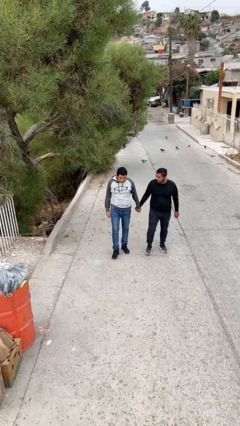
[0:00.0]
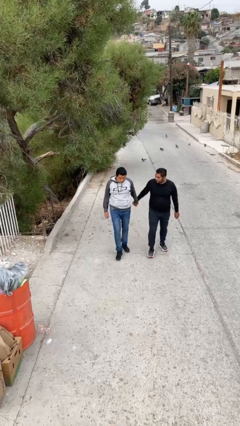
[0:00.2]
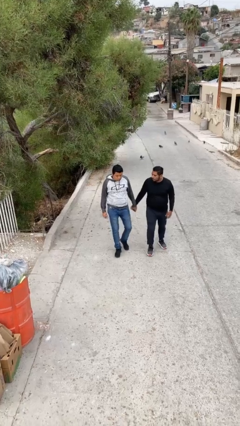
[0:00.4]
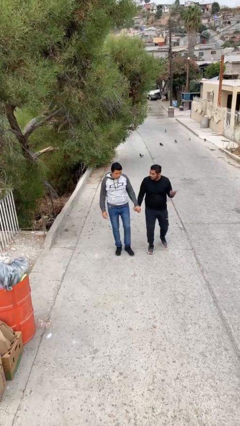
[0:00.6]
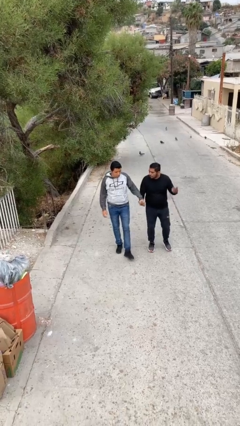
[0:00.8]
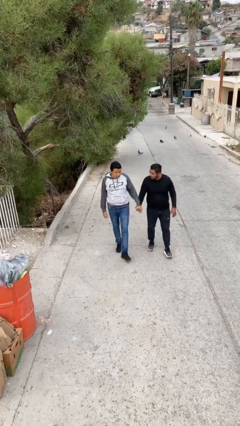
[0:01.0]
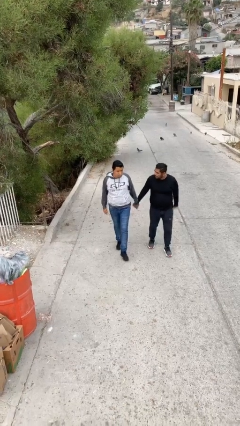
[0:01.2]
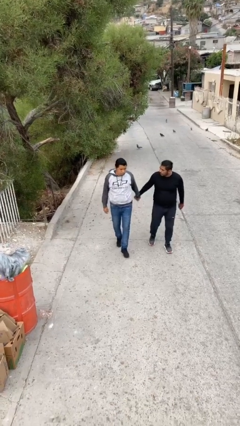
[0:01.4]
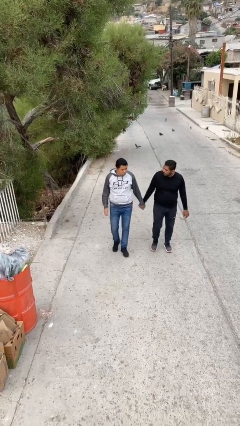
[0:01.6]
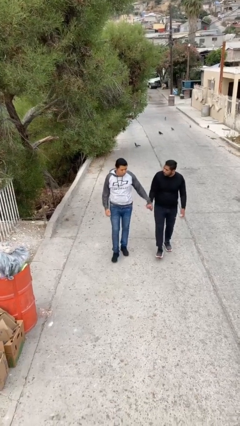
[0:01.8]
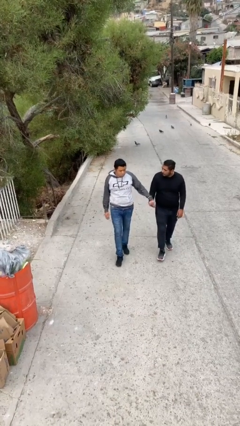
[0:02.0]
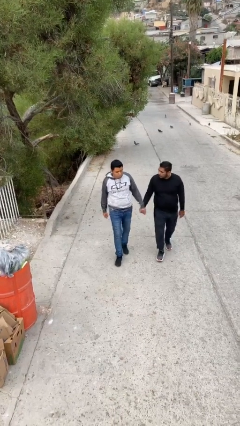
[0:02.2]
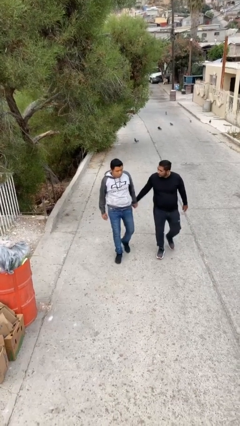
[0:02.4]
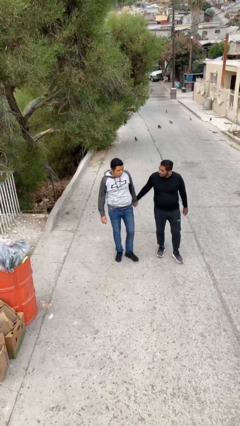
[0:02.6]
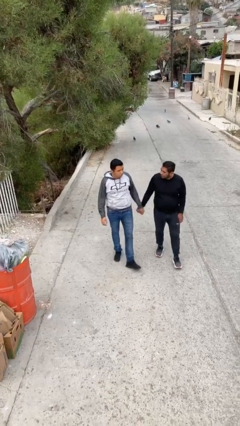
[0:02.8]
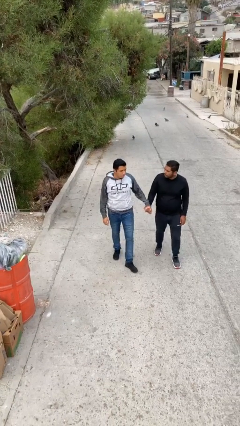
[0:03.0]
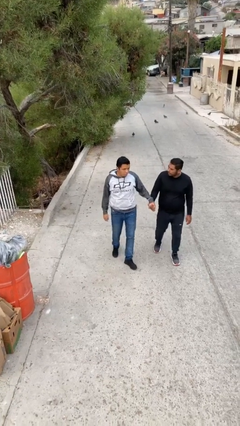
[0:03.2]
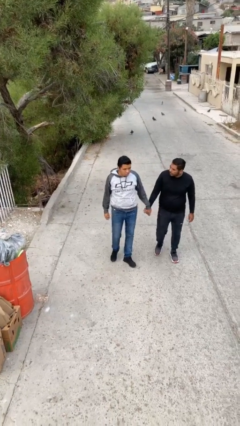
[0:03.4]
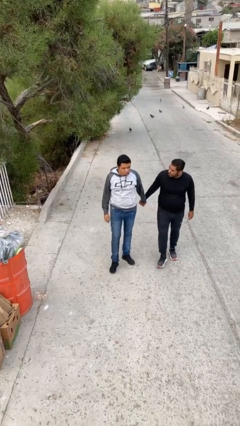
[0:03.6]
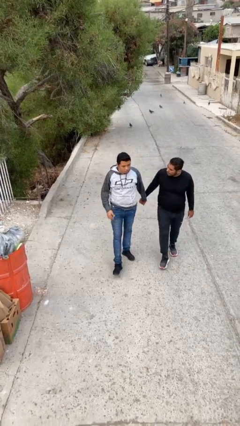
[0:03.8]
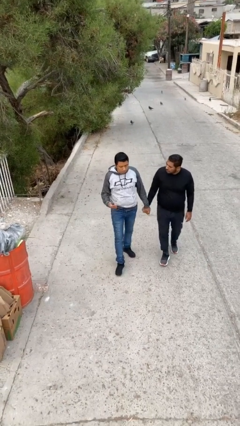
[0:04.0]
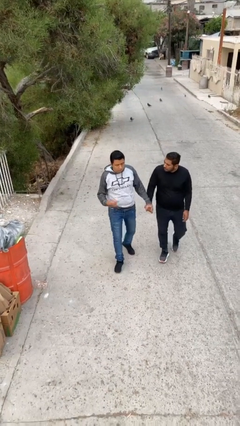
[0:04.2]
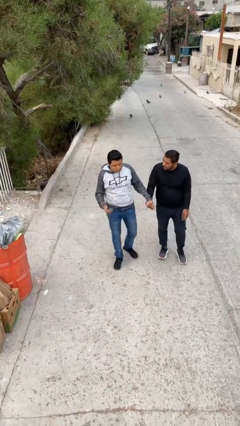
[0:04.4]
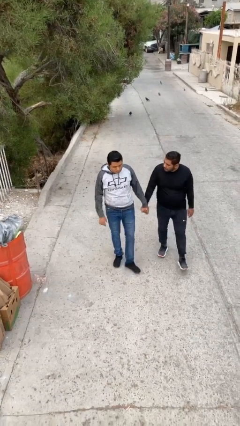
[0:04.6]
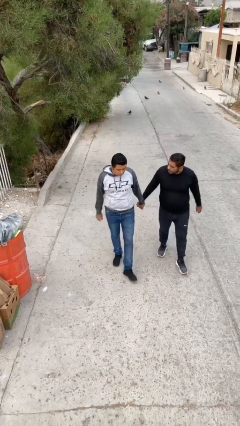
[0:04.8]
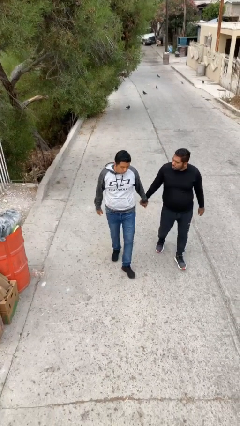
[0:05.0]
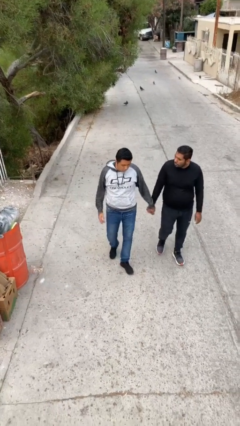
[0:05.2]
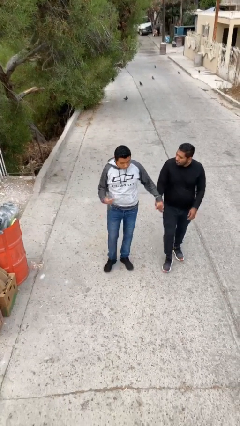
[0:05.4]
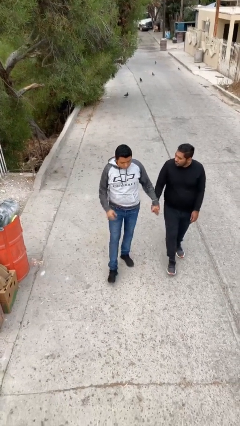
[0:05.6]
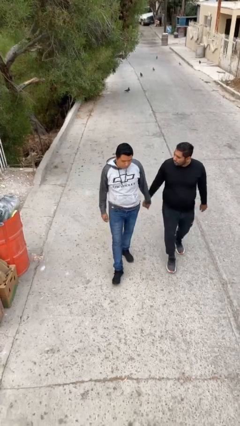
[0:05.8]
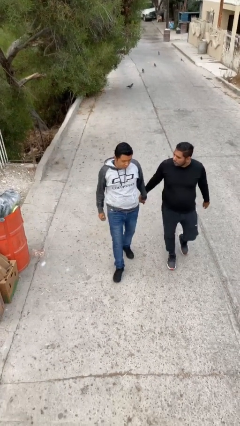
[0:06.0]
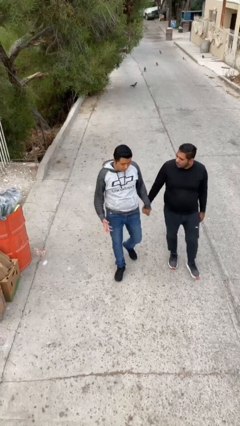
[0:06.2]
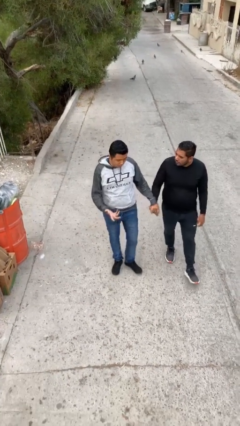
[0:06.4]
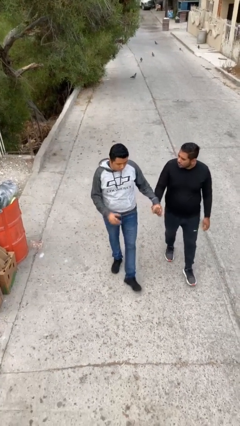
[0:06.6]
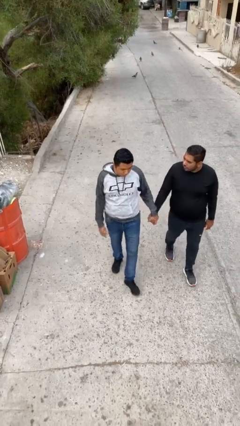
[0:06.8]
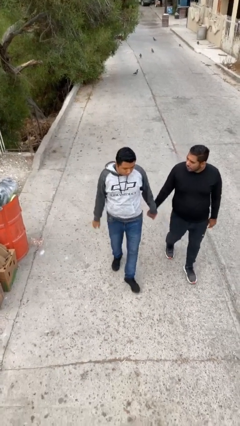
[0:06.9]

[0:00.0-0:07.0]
person holds hand

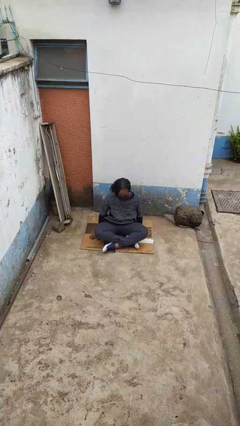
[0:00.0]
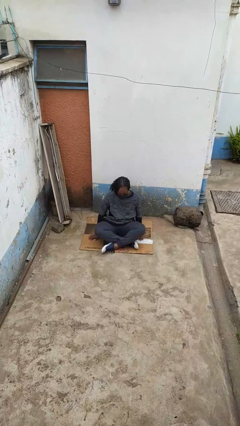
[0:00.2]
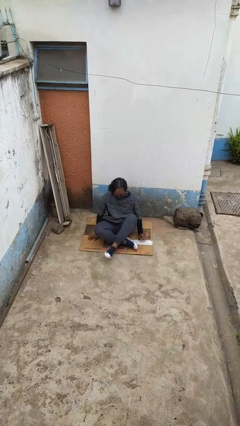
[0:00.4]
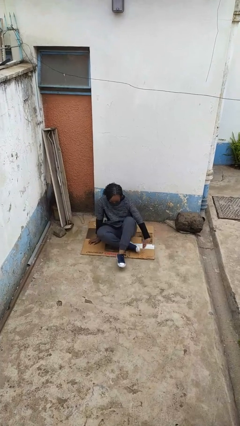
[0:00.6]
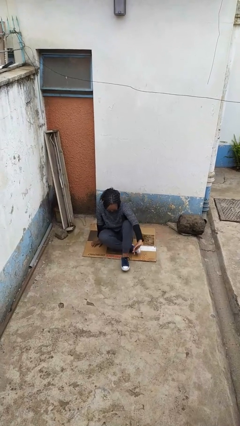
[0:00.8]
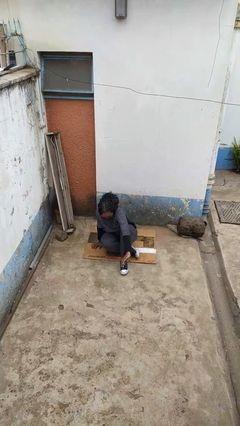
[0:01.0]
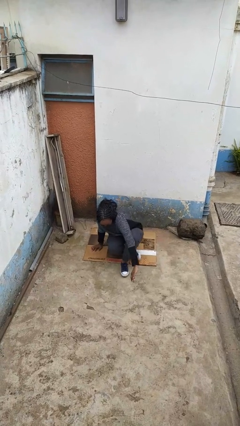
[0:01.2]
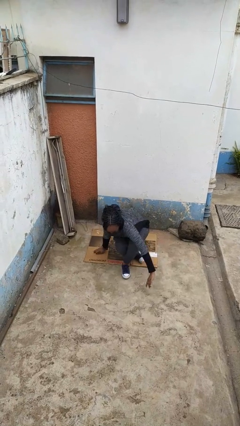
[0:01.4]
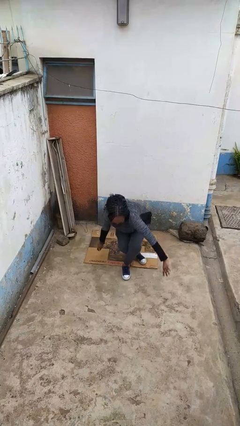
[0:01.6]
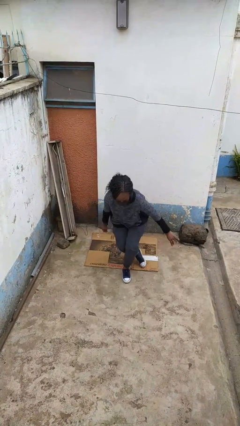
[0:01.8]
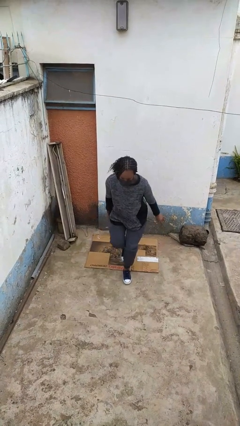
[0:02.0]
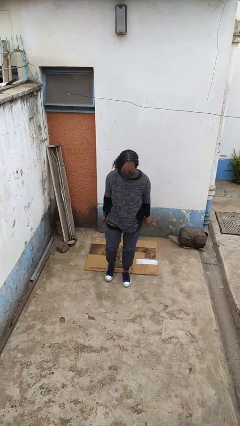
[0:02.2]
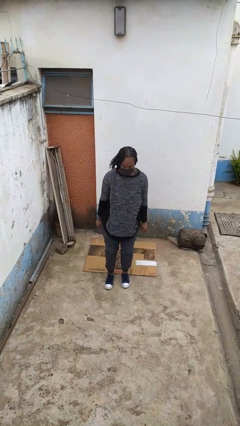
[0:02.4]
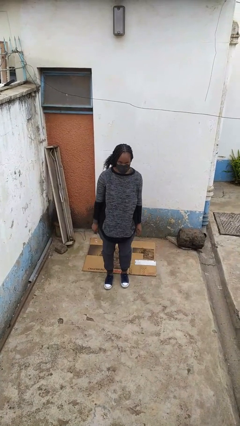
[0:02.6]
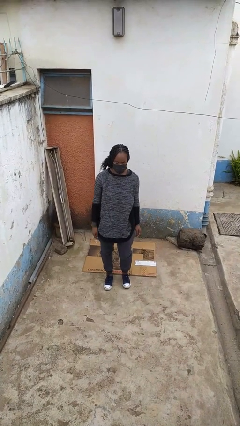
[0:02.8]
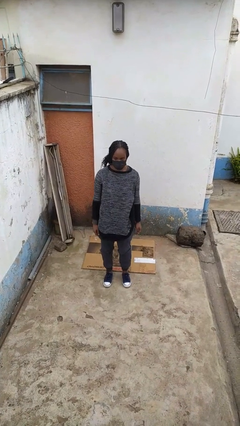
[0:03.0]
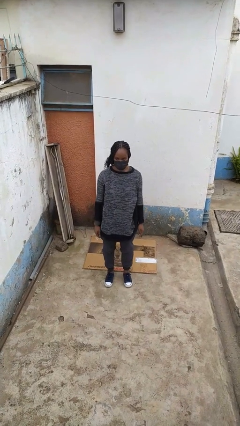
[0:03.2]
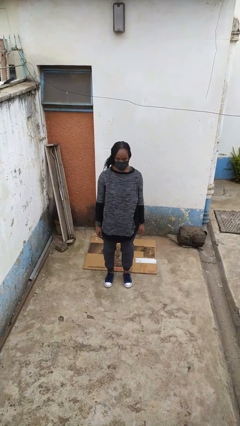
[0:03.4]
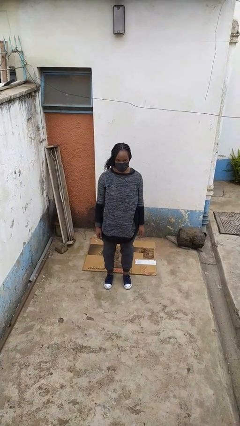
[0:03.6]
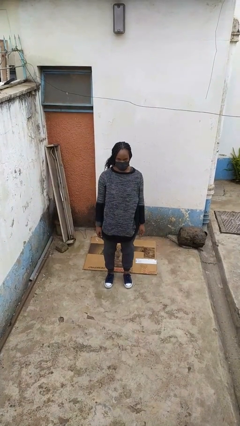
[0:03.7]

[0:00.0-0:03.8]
person stands up from floor

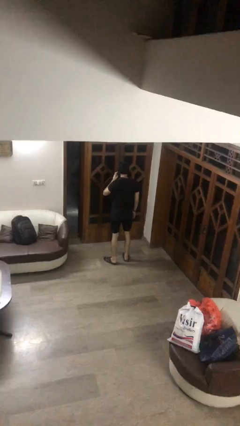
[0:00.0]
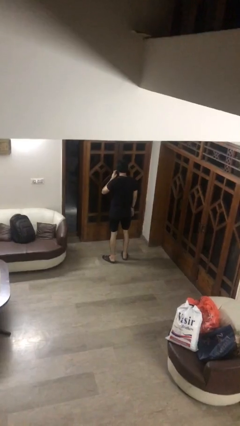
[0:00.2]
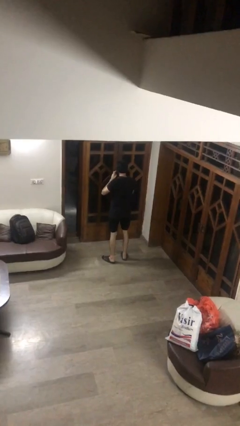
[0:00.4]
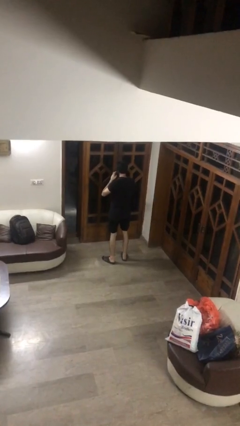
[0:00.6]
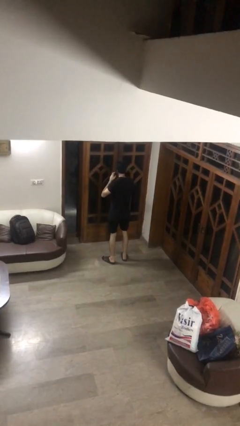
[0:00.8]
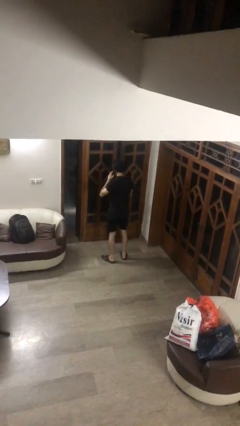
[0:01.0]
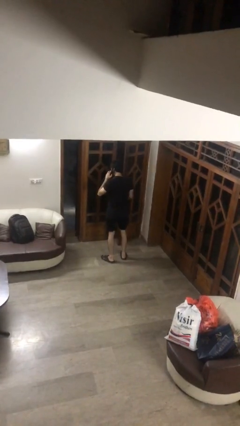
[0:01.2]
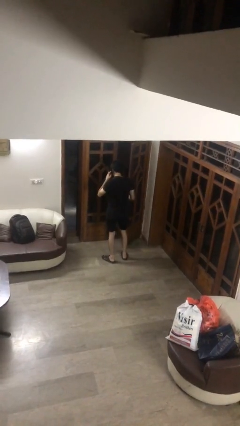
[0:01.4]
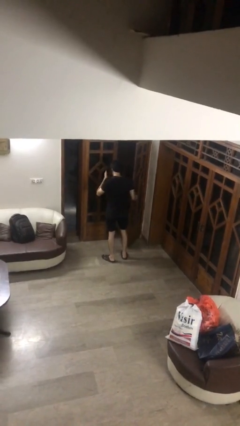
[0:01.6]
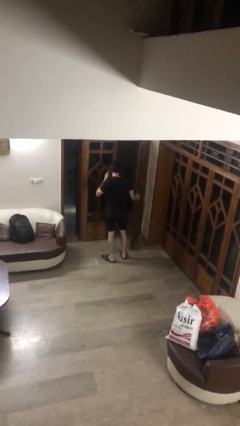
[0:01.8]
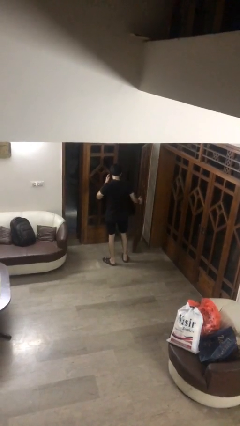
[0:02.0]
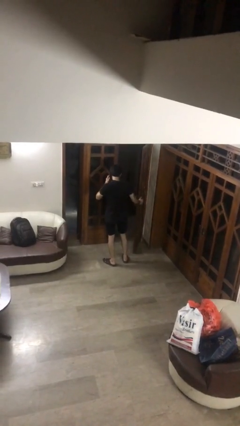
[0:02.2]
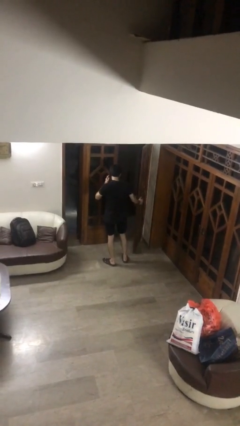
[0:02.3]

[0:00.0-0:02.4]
person opens facility door

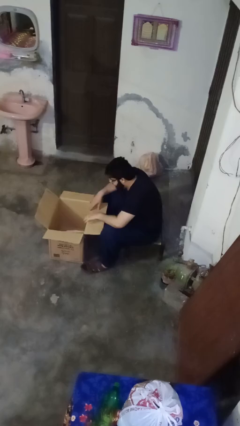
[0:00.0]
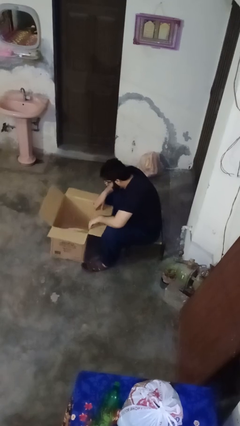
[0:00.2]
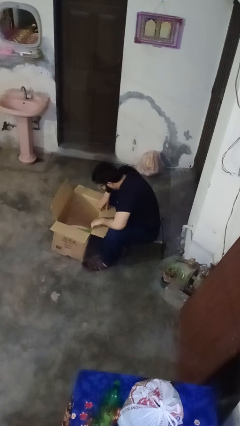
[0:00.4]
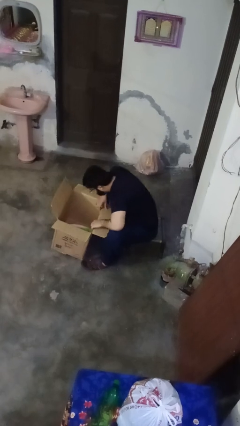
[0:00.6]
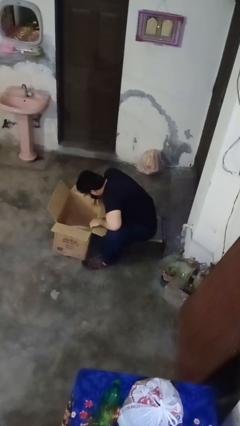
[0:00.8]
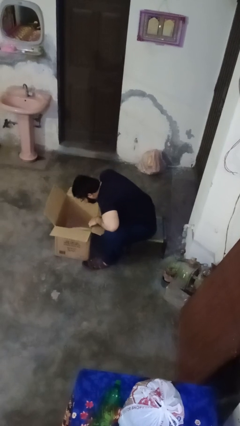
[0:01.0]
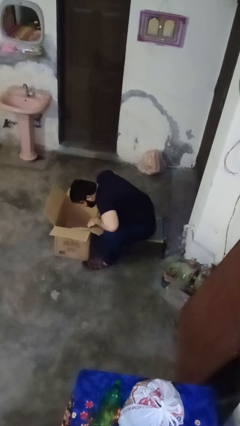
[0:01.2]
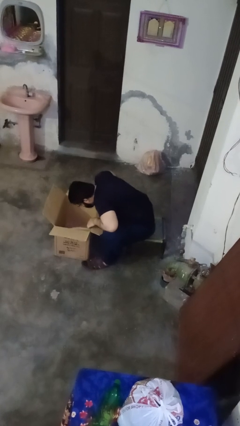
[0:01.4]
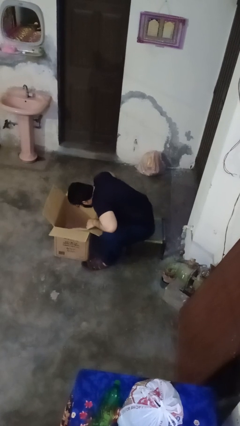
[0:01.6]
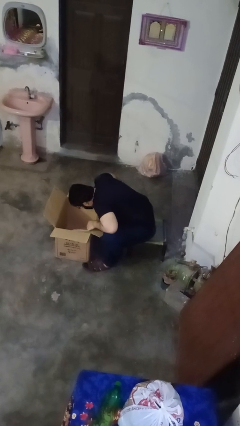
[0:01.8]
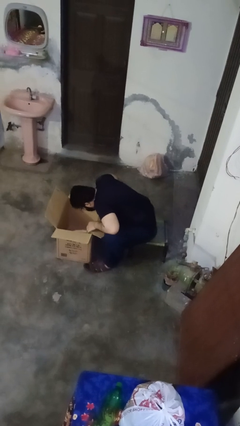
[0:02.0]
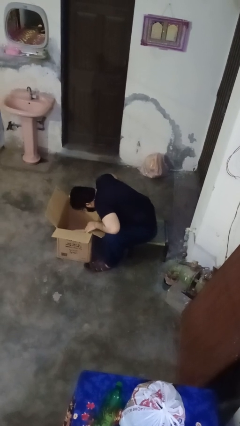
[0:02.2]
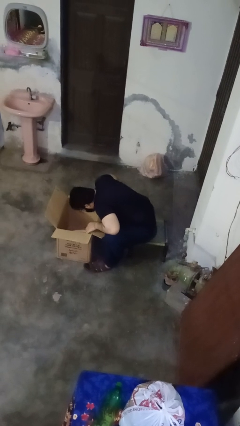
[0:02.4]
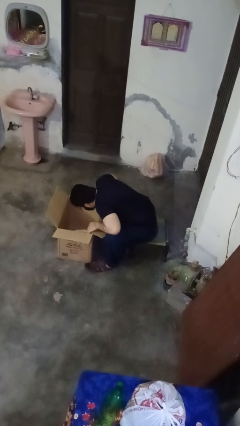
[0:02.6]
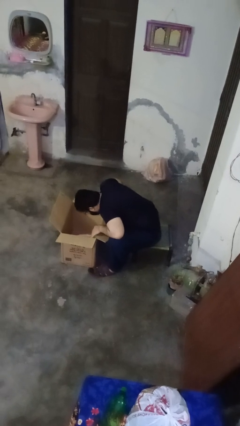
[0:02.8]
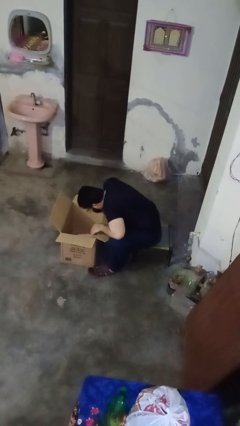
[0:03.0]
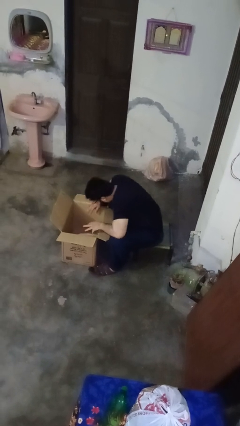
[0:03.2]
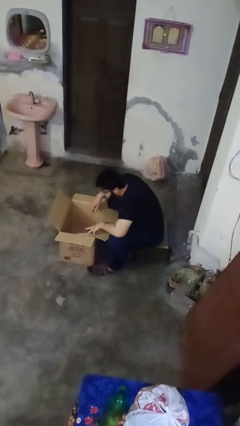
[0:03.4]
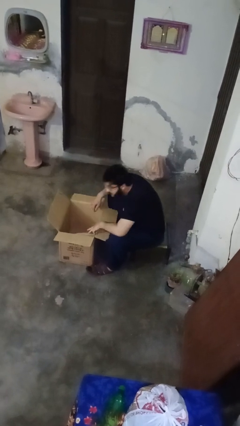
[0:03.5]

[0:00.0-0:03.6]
person searches in box

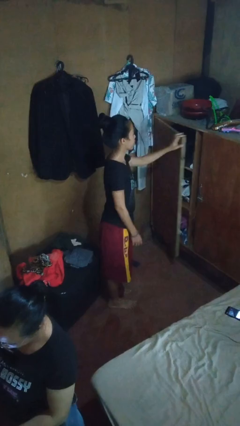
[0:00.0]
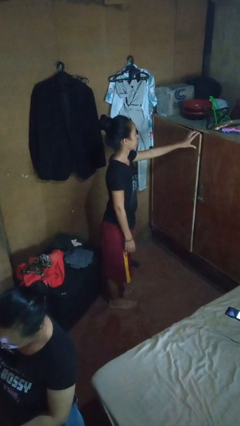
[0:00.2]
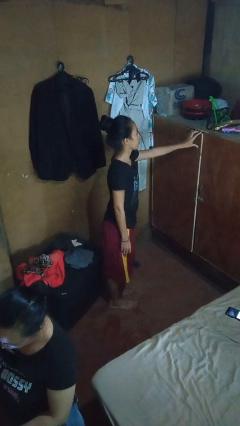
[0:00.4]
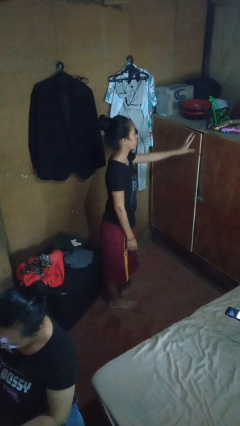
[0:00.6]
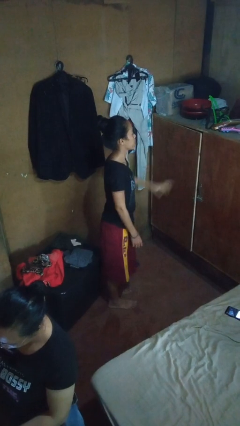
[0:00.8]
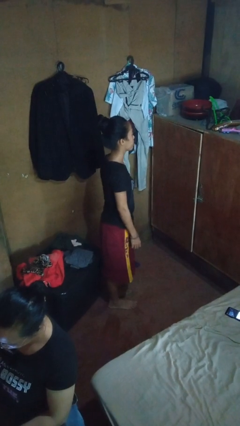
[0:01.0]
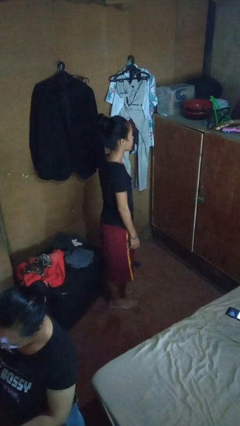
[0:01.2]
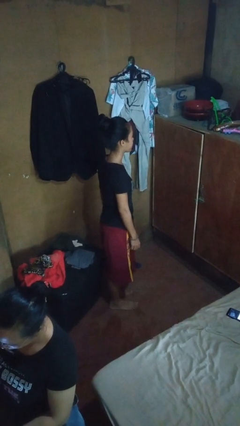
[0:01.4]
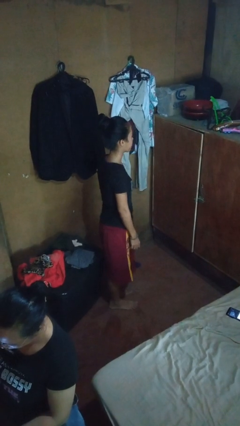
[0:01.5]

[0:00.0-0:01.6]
person closes closet door
